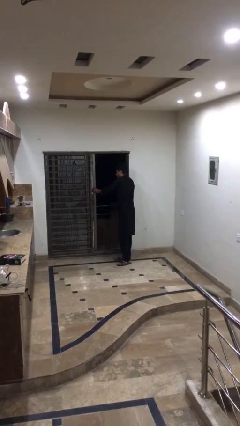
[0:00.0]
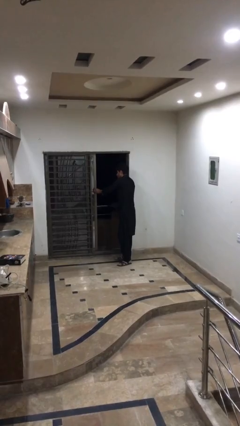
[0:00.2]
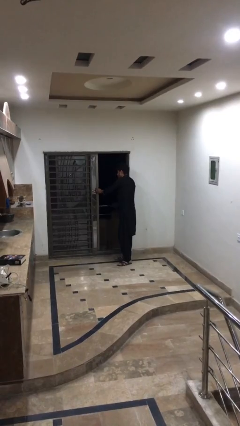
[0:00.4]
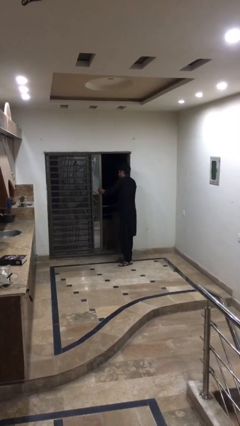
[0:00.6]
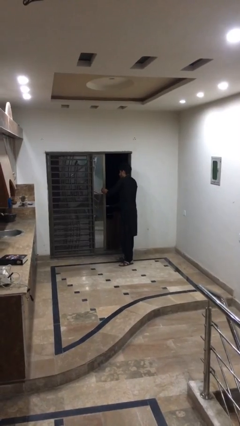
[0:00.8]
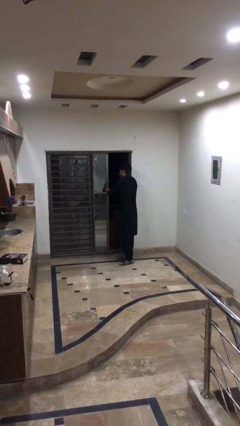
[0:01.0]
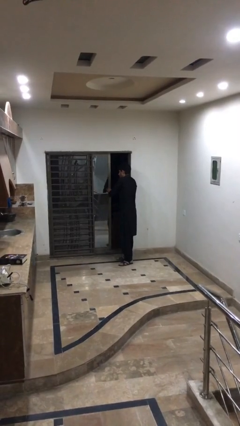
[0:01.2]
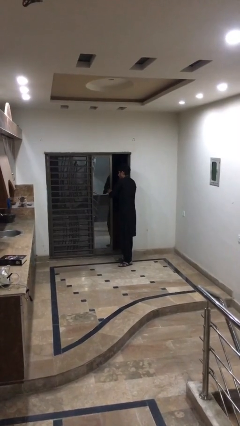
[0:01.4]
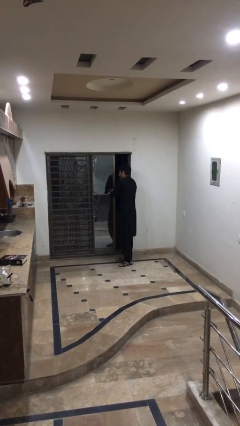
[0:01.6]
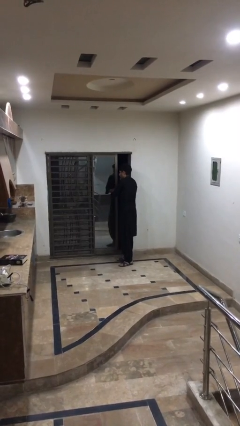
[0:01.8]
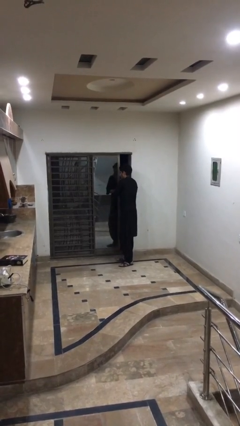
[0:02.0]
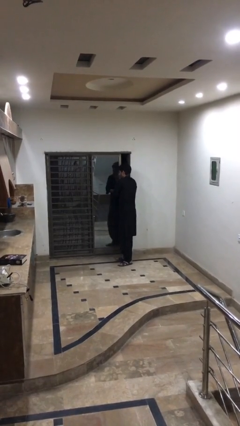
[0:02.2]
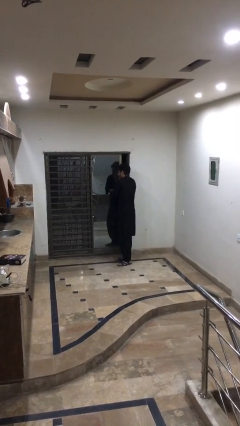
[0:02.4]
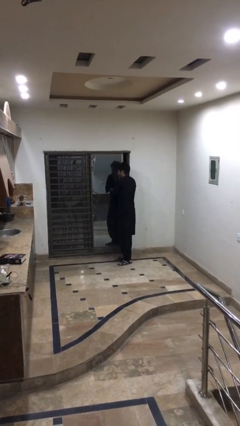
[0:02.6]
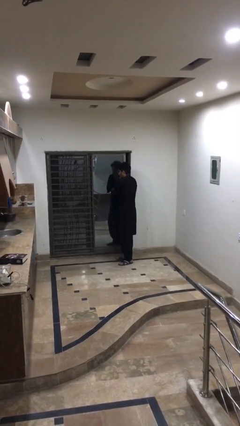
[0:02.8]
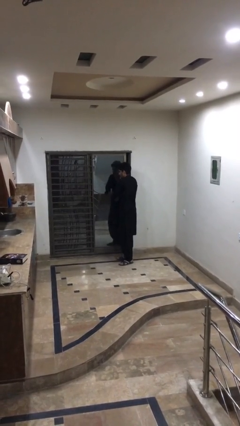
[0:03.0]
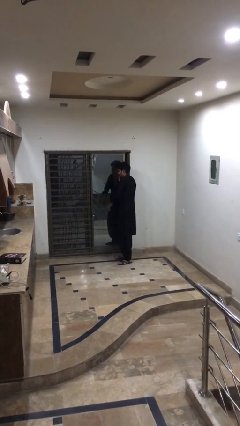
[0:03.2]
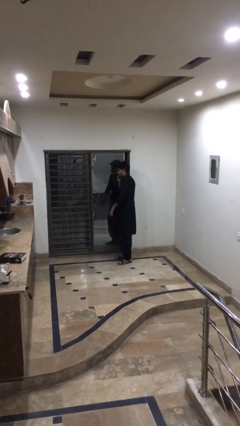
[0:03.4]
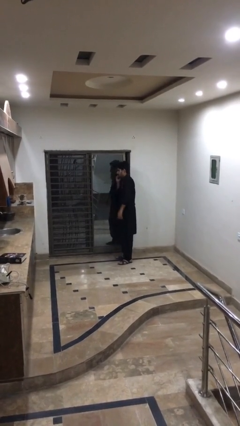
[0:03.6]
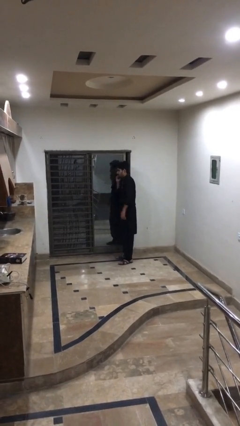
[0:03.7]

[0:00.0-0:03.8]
person closes facility door

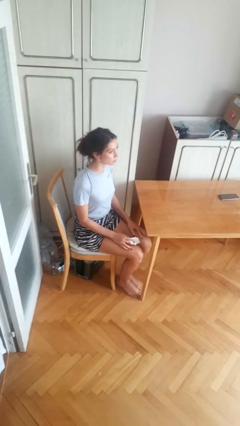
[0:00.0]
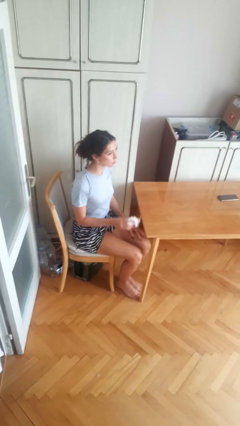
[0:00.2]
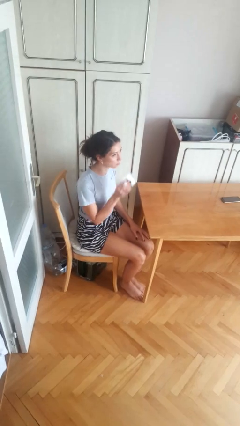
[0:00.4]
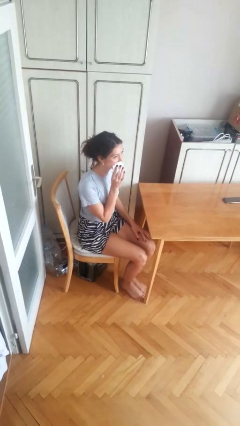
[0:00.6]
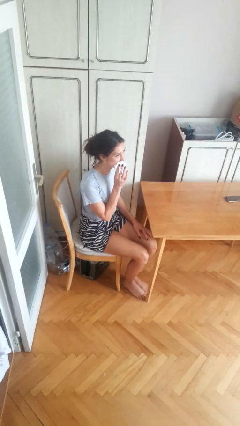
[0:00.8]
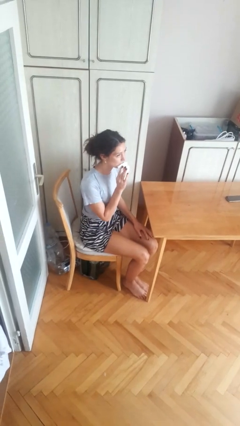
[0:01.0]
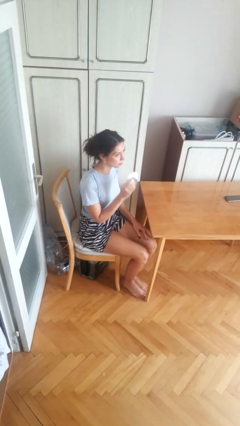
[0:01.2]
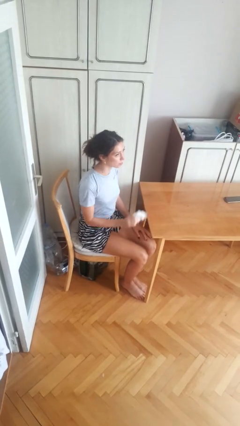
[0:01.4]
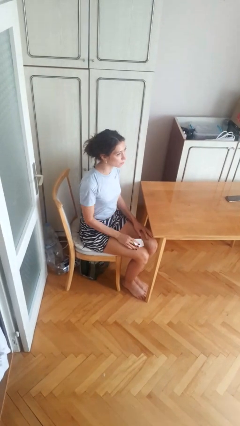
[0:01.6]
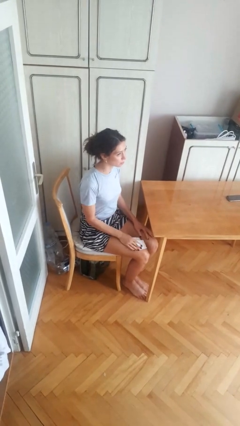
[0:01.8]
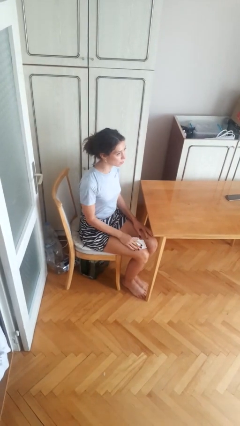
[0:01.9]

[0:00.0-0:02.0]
person wipes mouth with napkin

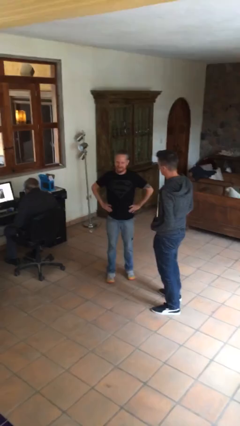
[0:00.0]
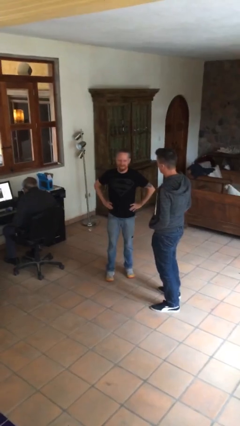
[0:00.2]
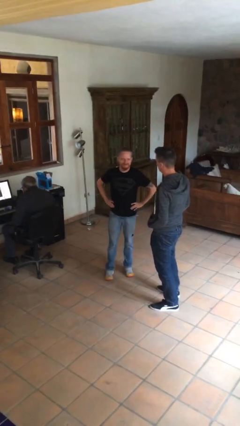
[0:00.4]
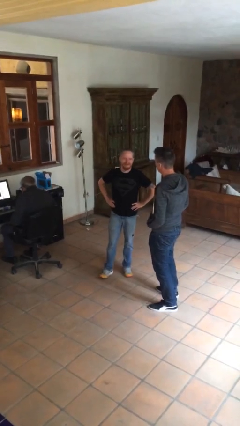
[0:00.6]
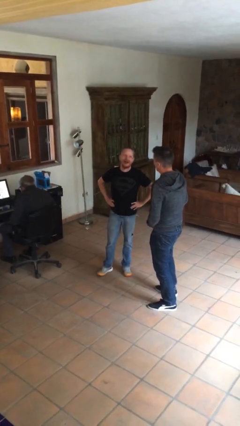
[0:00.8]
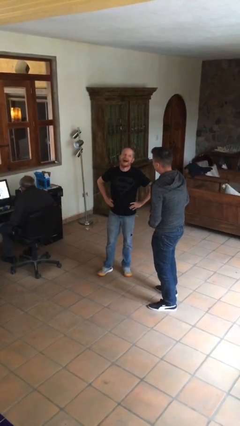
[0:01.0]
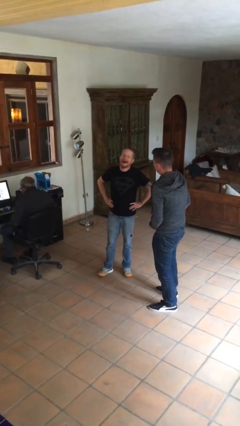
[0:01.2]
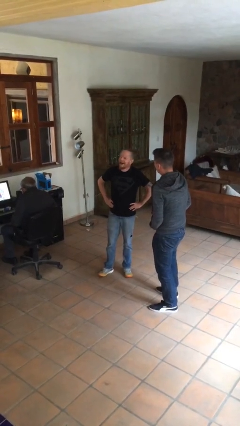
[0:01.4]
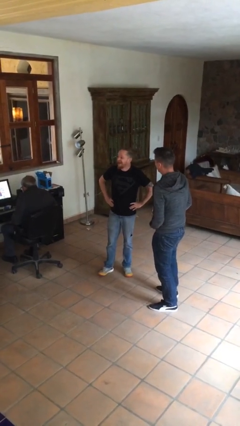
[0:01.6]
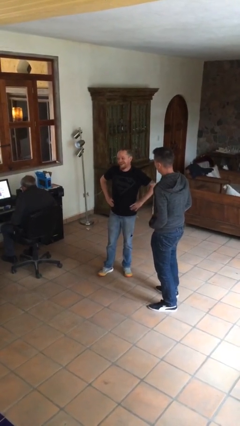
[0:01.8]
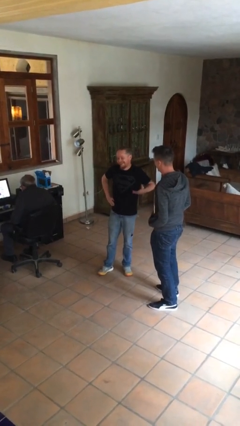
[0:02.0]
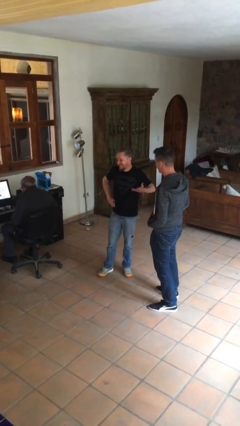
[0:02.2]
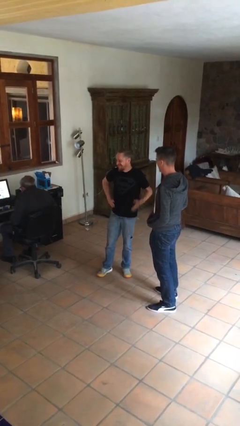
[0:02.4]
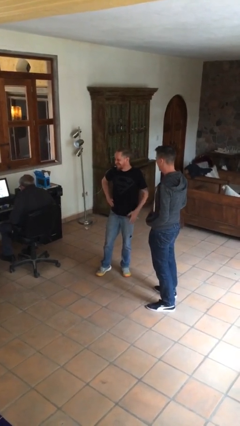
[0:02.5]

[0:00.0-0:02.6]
person laughs with person

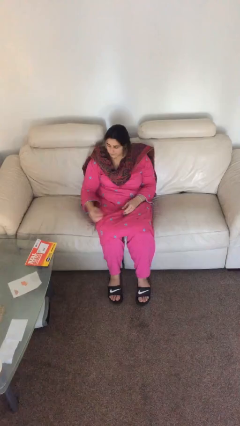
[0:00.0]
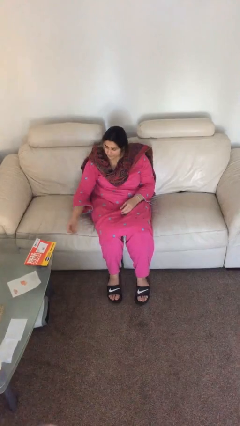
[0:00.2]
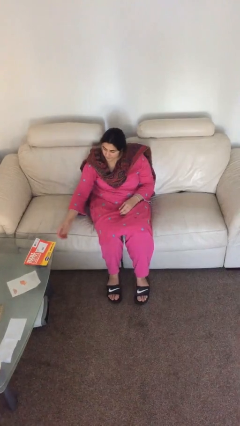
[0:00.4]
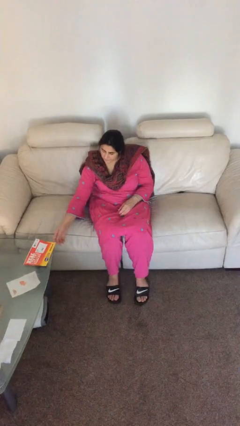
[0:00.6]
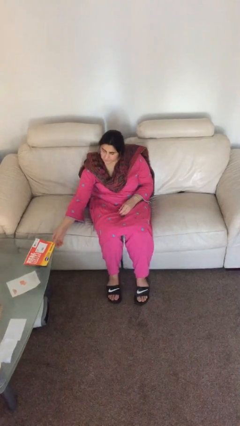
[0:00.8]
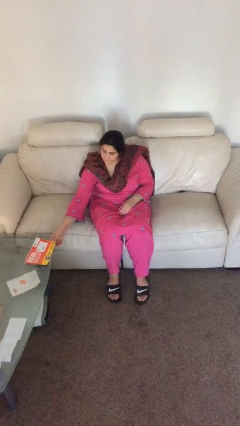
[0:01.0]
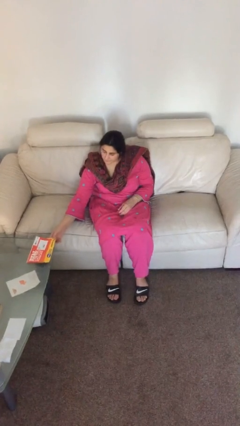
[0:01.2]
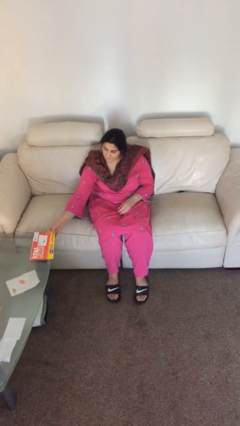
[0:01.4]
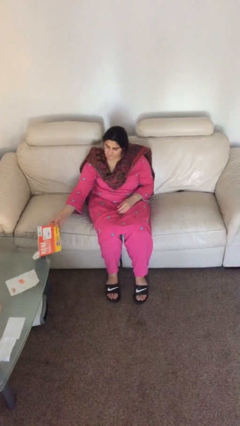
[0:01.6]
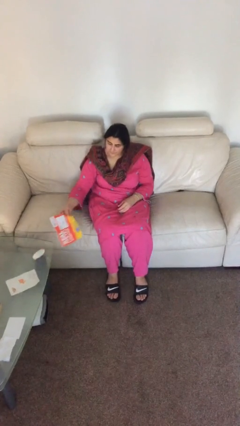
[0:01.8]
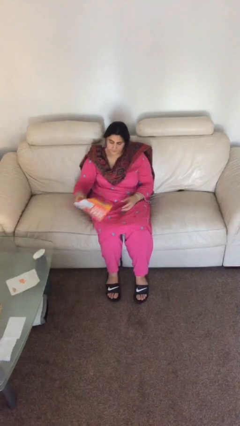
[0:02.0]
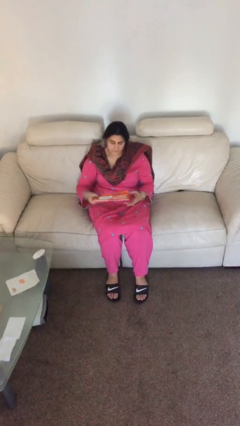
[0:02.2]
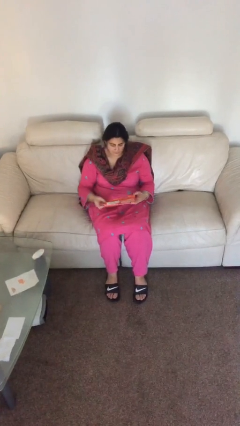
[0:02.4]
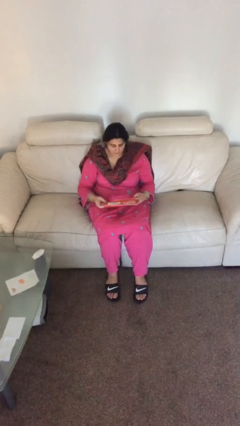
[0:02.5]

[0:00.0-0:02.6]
person picks up object from table

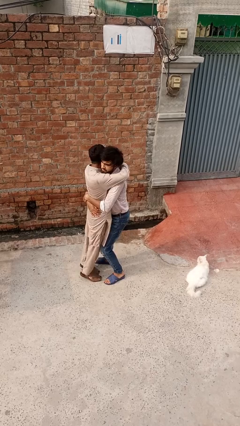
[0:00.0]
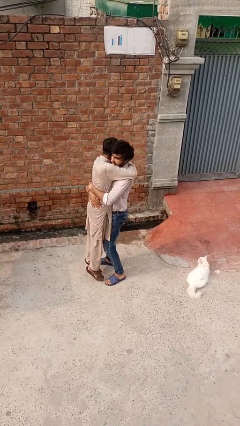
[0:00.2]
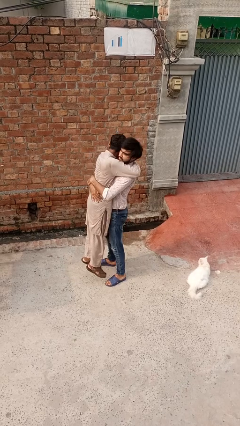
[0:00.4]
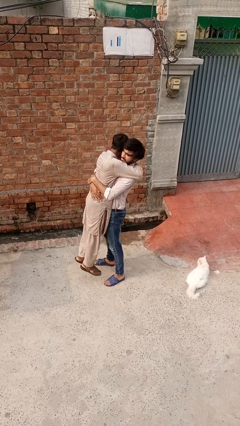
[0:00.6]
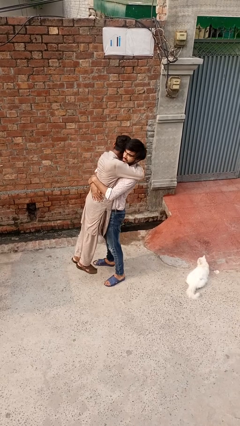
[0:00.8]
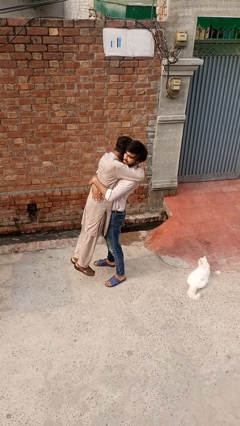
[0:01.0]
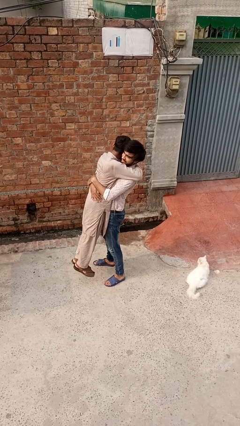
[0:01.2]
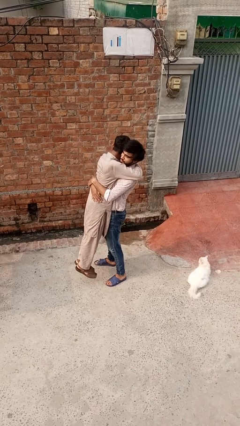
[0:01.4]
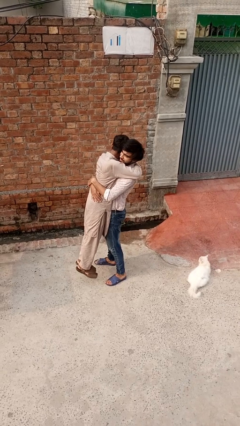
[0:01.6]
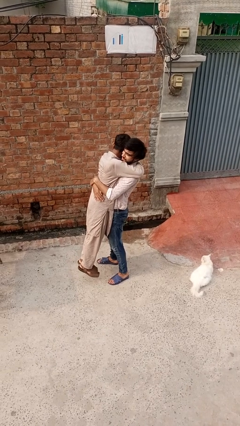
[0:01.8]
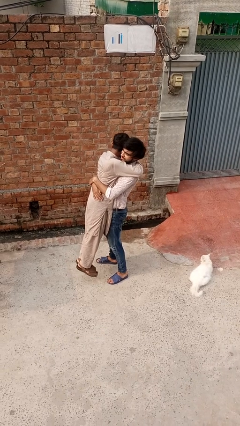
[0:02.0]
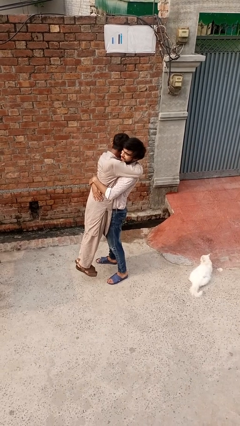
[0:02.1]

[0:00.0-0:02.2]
person picks up person

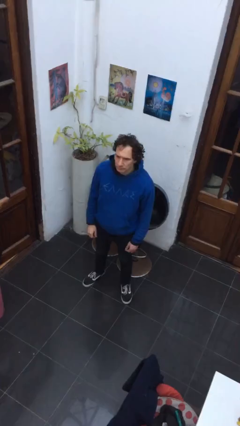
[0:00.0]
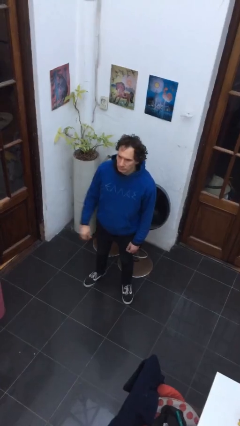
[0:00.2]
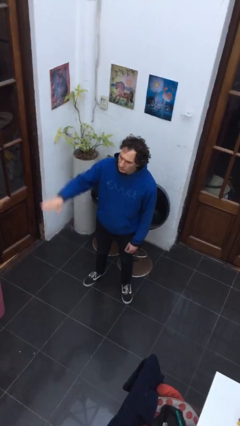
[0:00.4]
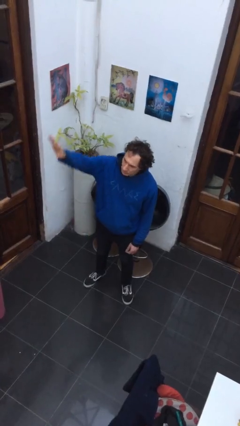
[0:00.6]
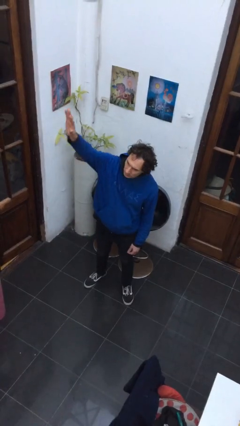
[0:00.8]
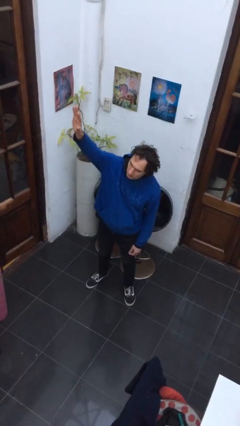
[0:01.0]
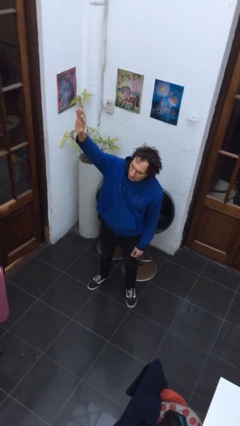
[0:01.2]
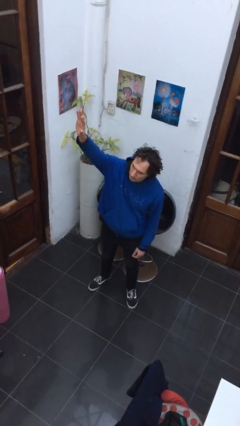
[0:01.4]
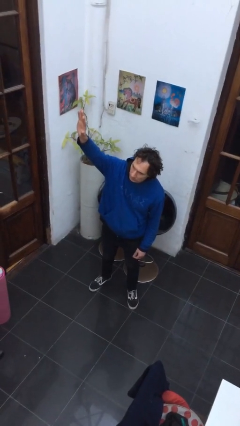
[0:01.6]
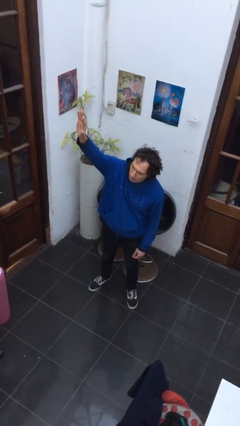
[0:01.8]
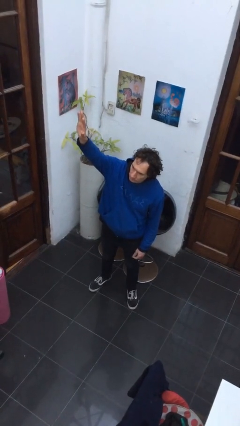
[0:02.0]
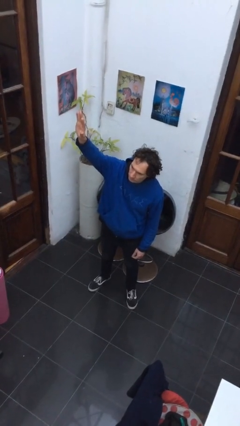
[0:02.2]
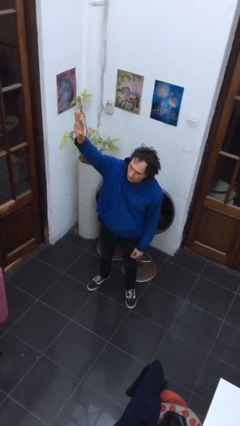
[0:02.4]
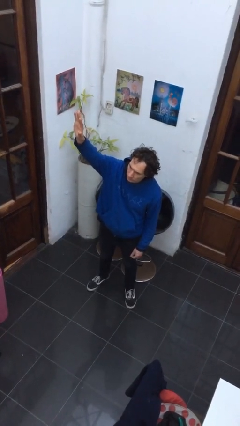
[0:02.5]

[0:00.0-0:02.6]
person gestures raise hand

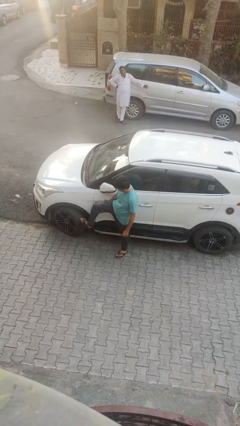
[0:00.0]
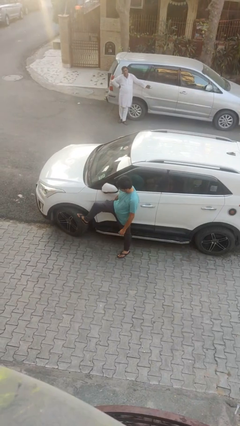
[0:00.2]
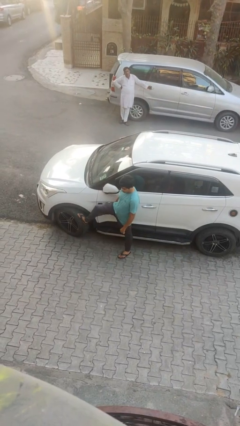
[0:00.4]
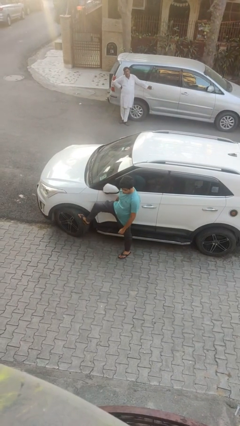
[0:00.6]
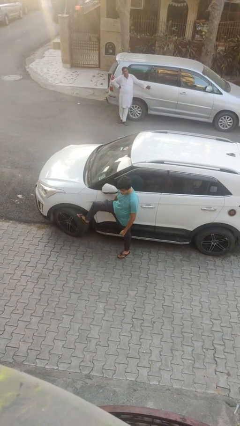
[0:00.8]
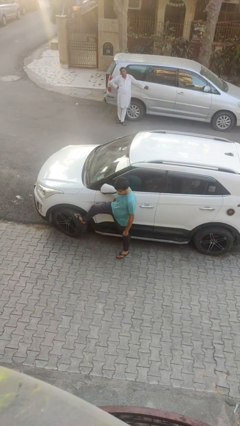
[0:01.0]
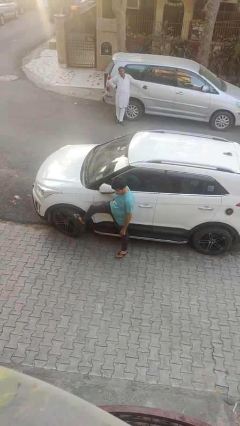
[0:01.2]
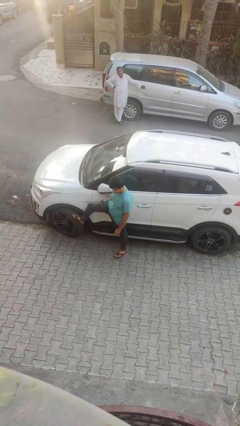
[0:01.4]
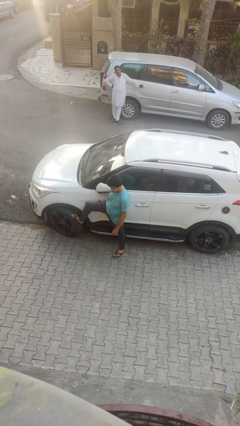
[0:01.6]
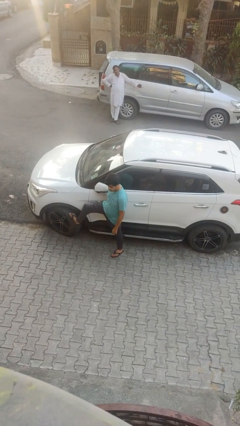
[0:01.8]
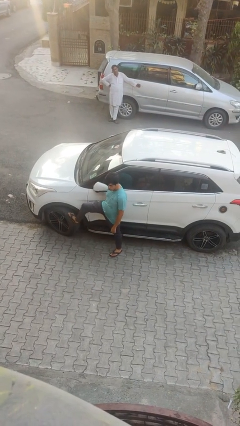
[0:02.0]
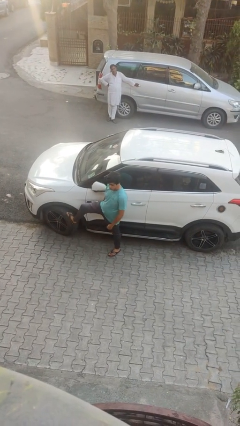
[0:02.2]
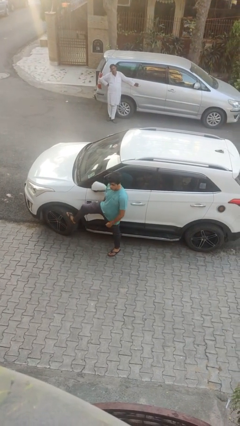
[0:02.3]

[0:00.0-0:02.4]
person kicks car tires
